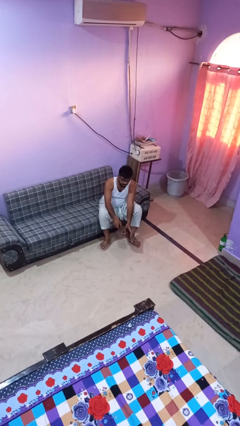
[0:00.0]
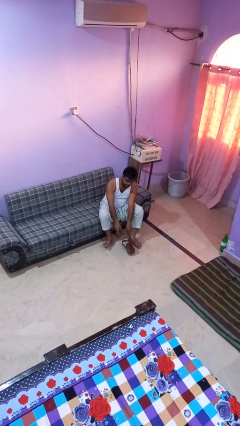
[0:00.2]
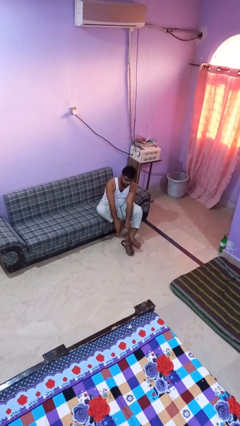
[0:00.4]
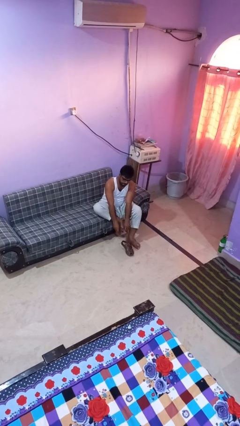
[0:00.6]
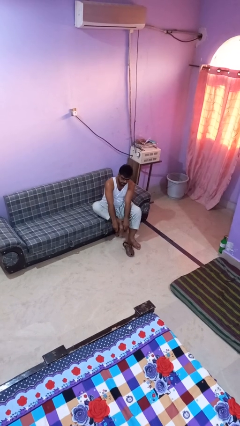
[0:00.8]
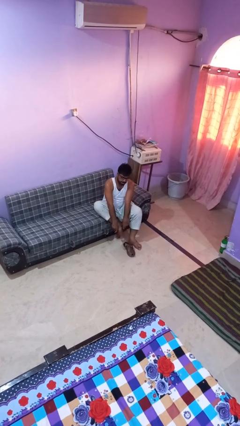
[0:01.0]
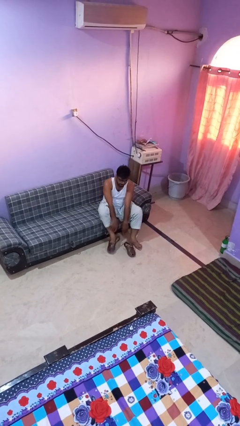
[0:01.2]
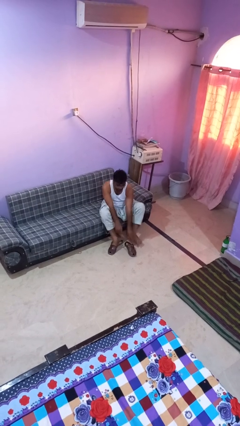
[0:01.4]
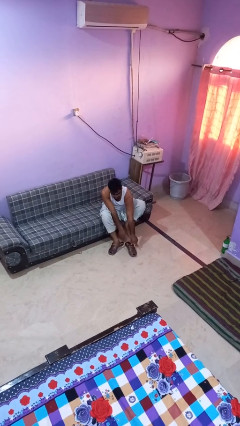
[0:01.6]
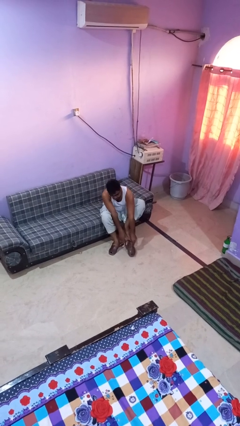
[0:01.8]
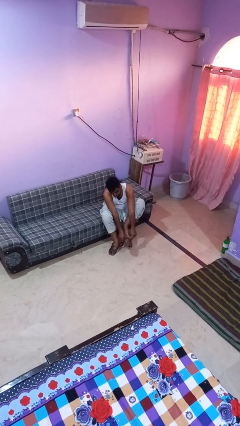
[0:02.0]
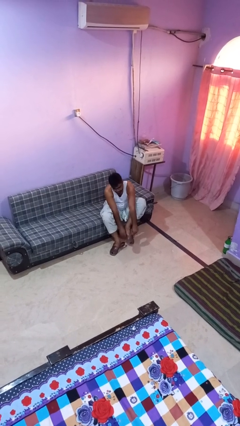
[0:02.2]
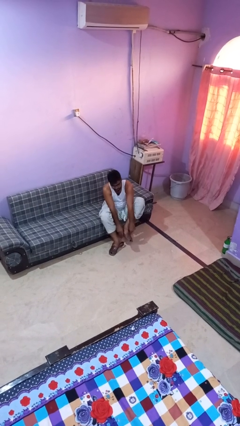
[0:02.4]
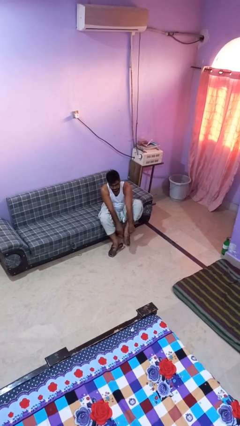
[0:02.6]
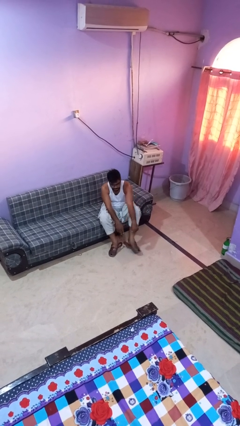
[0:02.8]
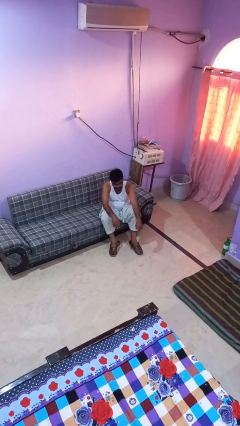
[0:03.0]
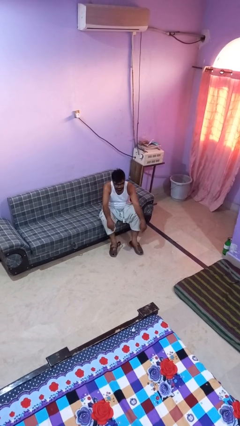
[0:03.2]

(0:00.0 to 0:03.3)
person puts on shoes

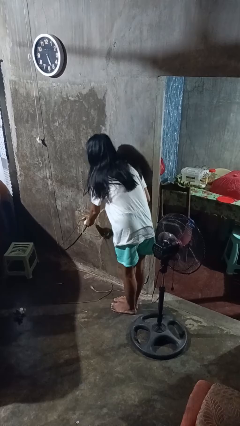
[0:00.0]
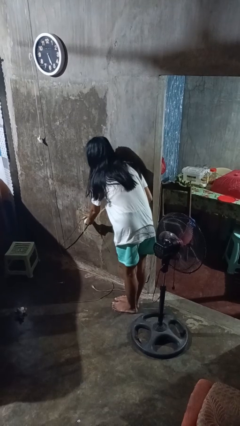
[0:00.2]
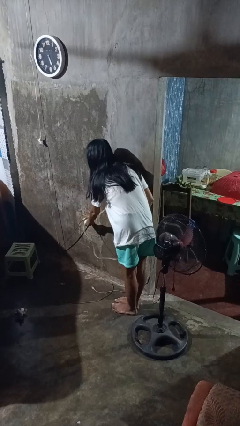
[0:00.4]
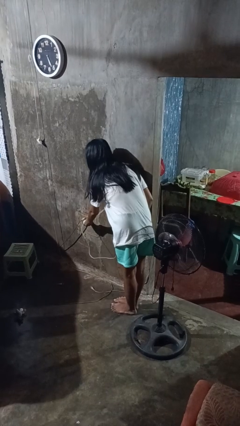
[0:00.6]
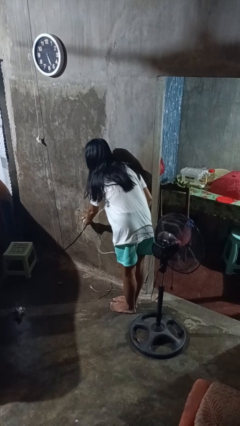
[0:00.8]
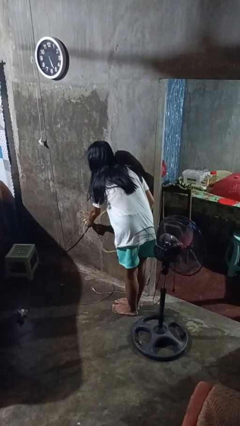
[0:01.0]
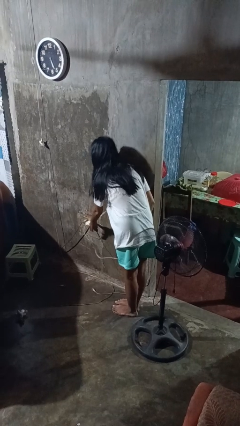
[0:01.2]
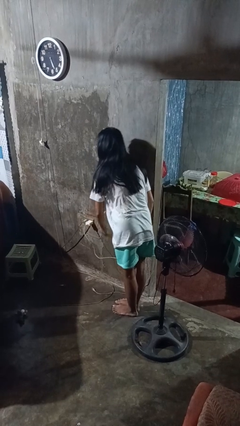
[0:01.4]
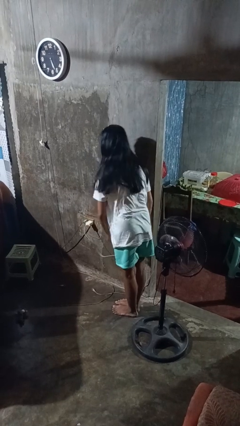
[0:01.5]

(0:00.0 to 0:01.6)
person plugs into electrical socket

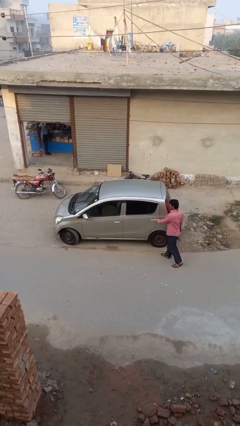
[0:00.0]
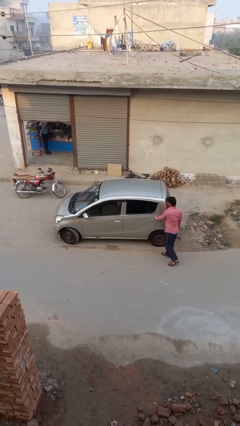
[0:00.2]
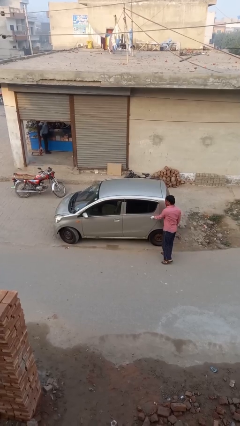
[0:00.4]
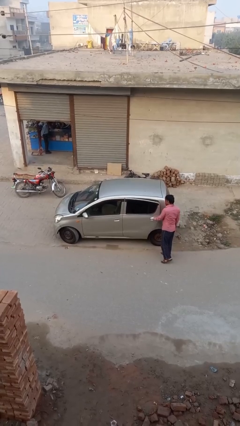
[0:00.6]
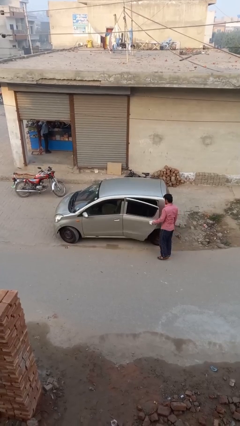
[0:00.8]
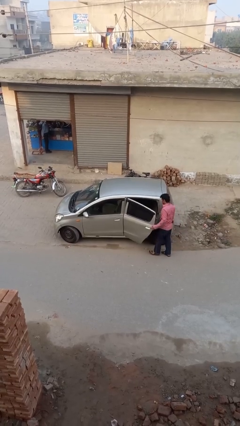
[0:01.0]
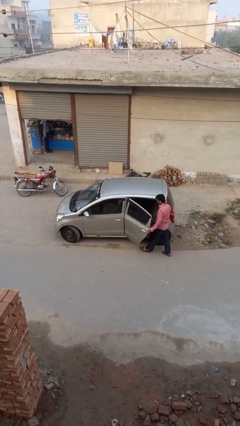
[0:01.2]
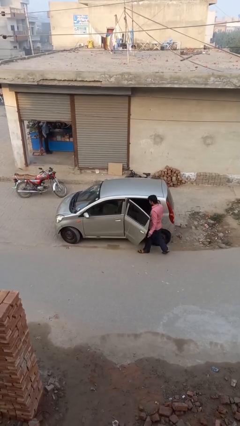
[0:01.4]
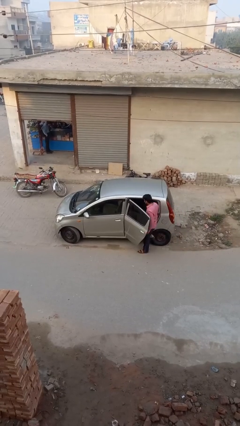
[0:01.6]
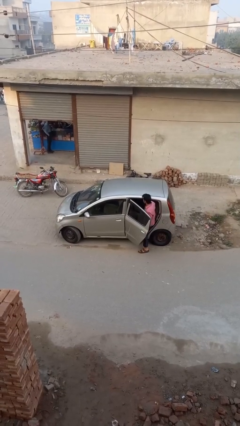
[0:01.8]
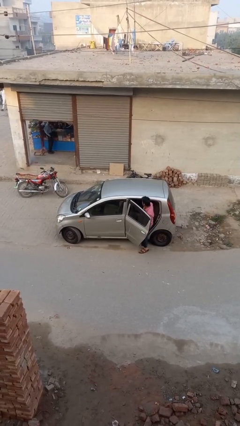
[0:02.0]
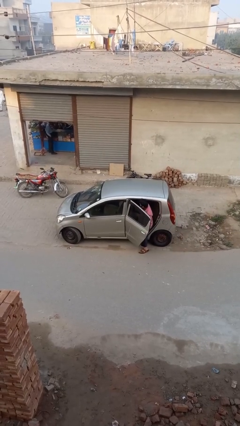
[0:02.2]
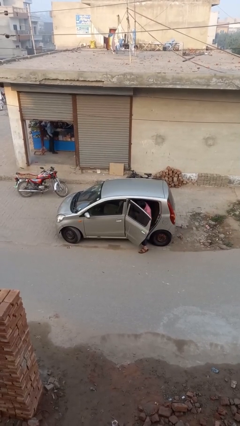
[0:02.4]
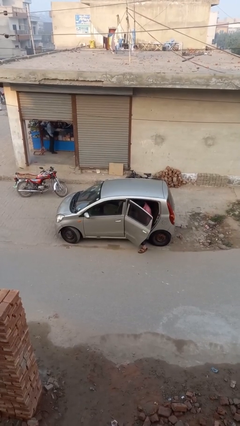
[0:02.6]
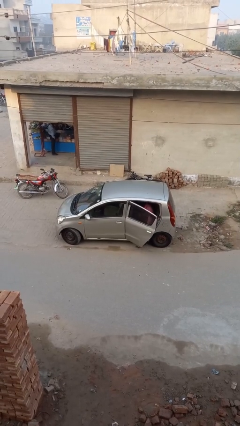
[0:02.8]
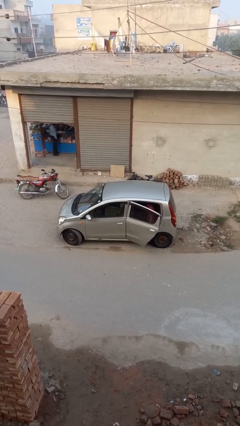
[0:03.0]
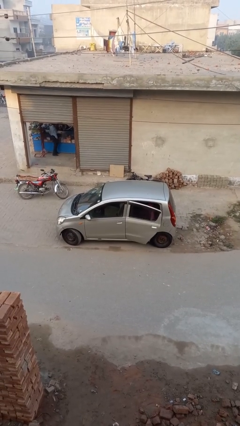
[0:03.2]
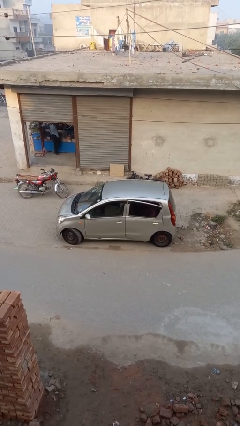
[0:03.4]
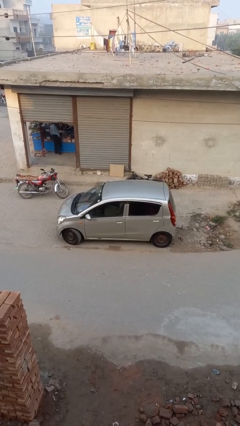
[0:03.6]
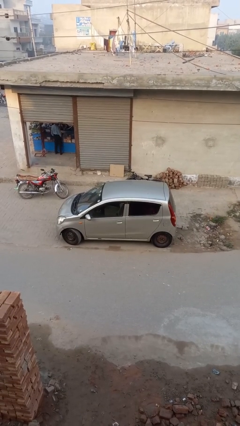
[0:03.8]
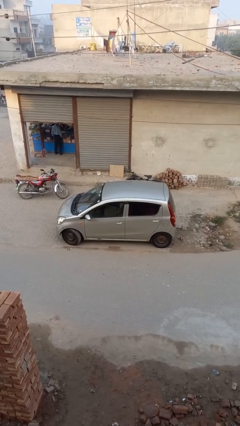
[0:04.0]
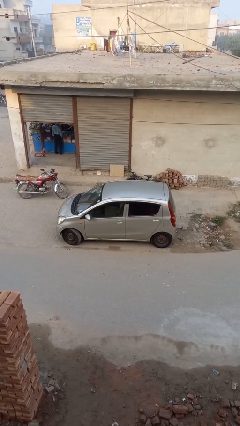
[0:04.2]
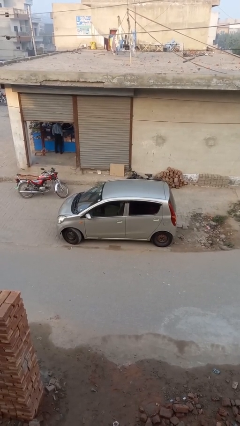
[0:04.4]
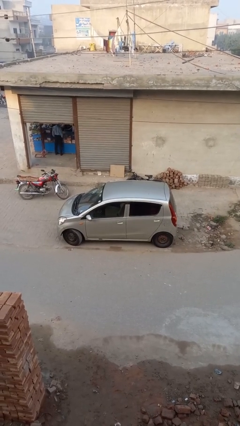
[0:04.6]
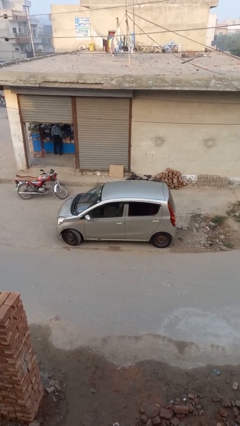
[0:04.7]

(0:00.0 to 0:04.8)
car picks up person

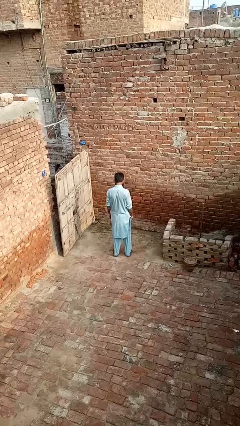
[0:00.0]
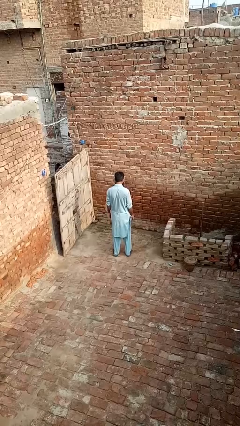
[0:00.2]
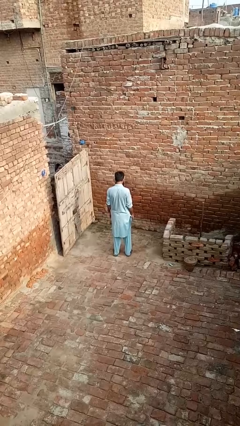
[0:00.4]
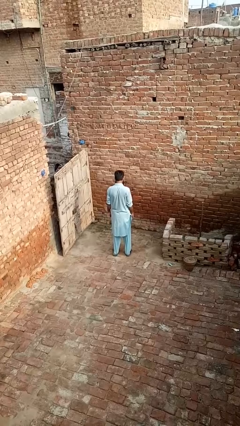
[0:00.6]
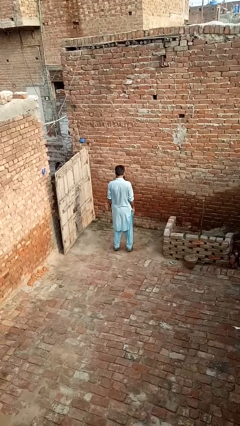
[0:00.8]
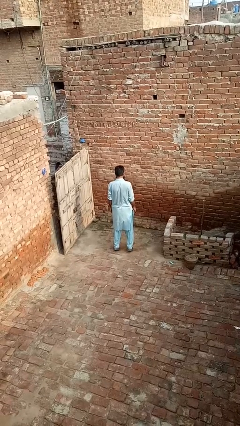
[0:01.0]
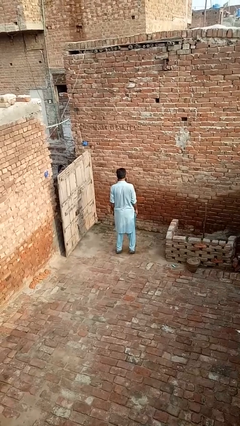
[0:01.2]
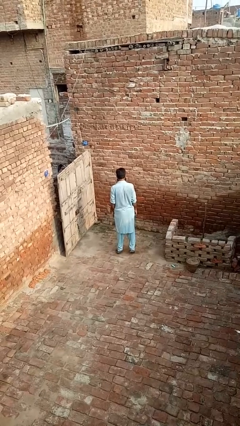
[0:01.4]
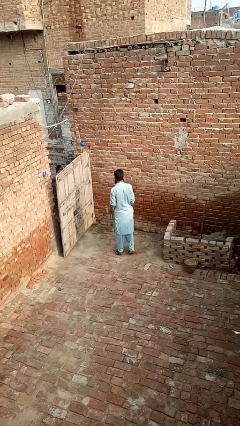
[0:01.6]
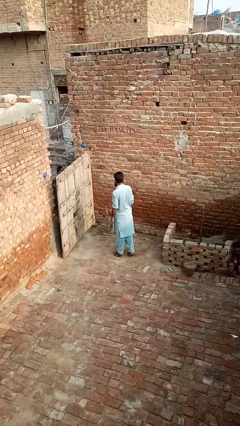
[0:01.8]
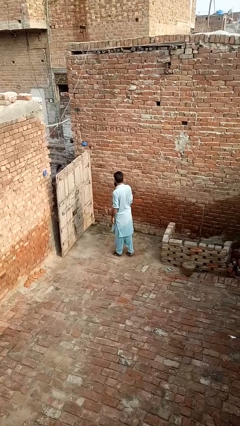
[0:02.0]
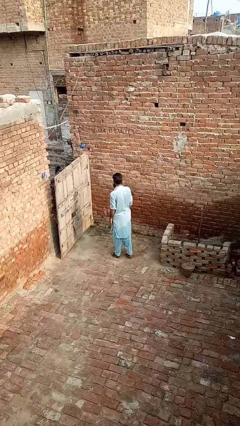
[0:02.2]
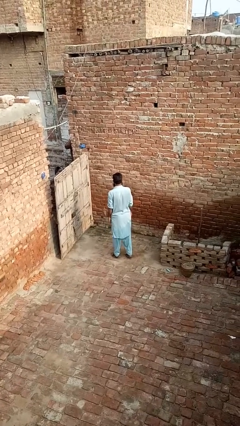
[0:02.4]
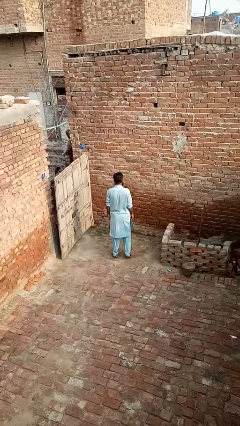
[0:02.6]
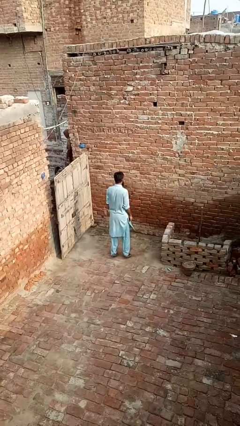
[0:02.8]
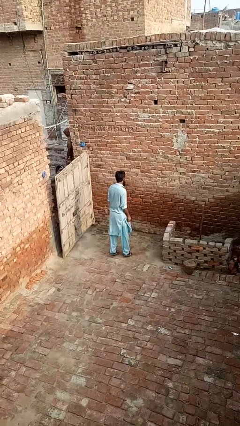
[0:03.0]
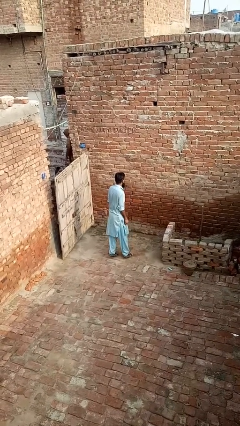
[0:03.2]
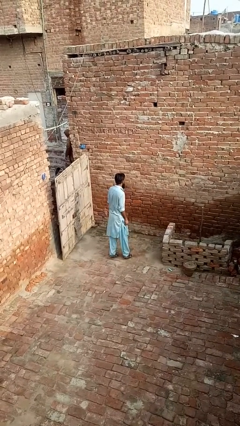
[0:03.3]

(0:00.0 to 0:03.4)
person twirls

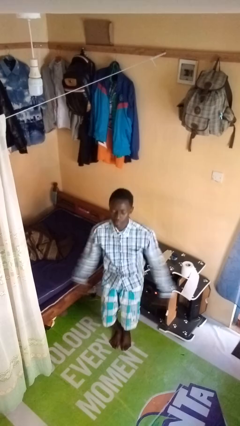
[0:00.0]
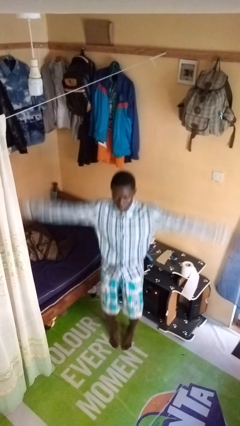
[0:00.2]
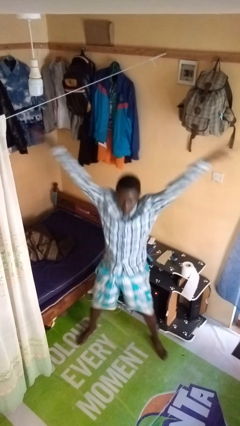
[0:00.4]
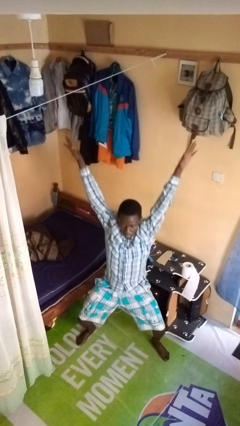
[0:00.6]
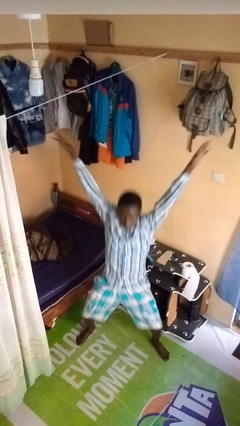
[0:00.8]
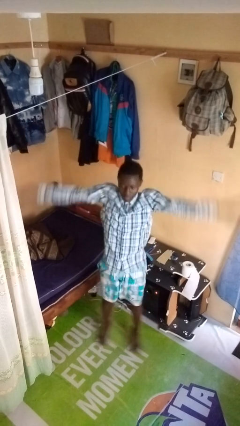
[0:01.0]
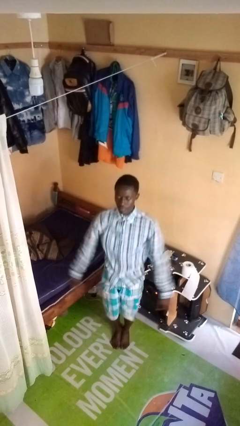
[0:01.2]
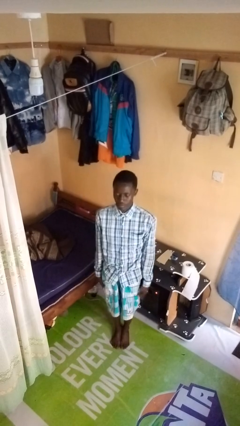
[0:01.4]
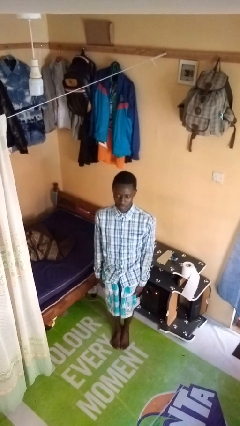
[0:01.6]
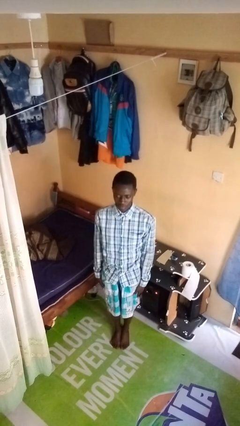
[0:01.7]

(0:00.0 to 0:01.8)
person exercises with jumping jacks

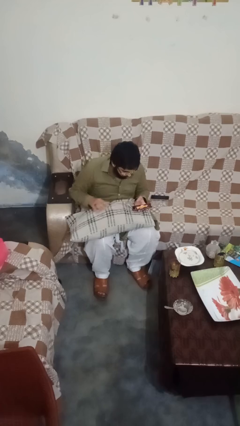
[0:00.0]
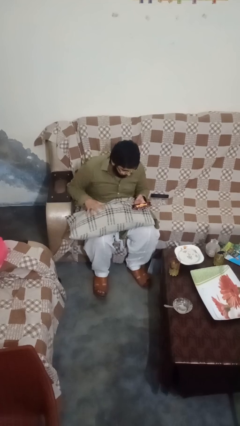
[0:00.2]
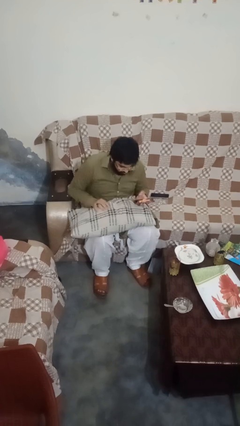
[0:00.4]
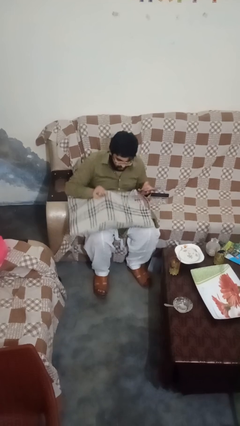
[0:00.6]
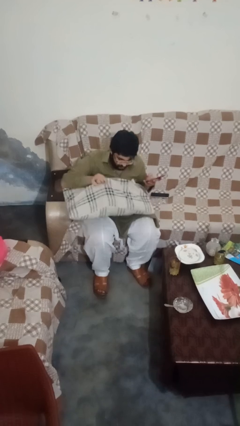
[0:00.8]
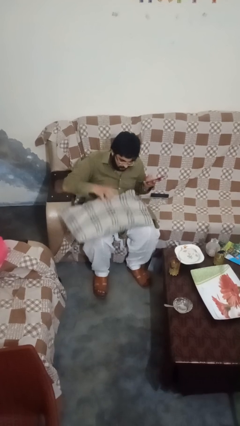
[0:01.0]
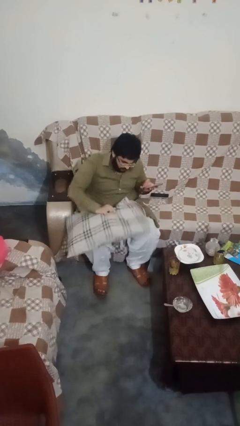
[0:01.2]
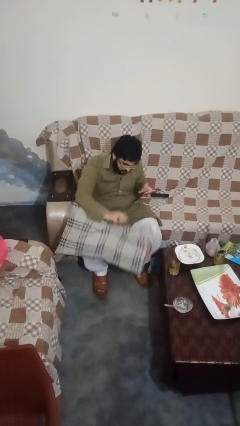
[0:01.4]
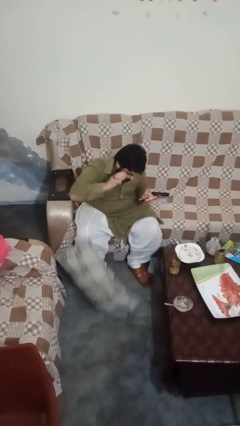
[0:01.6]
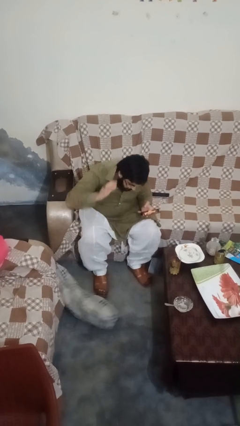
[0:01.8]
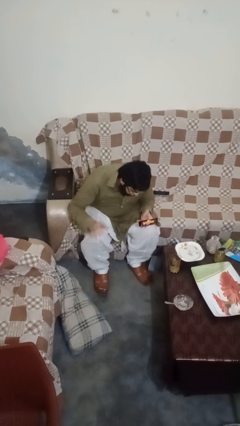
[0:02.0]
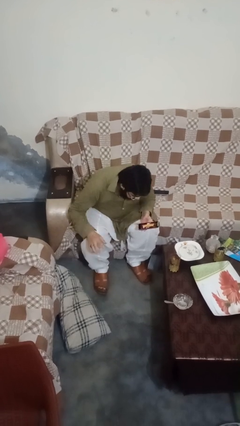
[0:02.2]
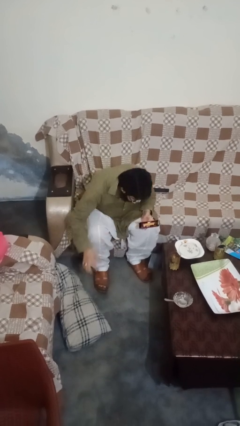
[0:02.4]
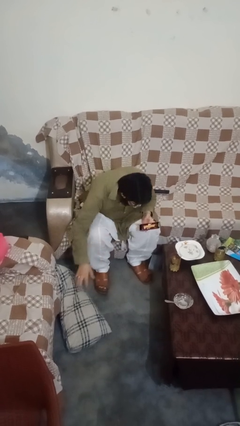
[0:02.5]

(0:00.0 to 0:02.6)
person drops object
